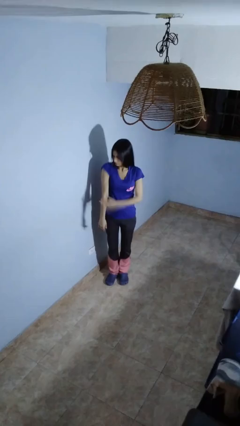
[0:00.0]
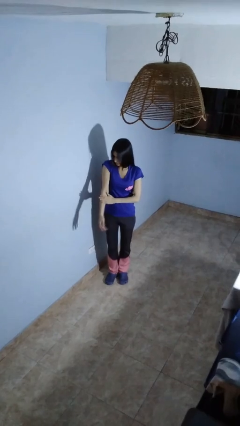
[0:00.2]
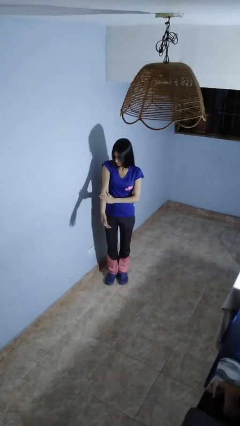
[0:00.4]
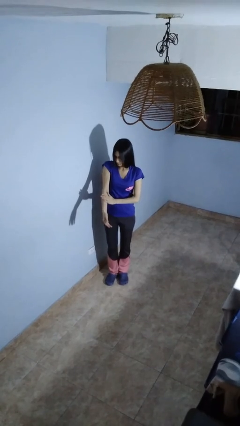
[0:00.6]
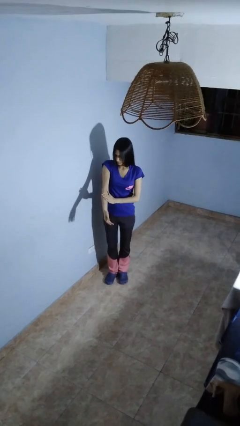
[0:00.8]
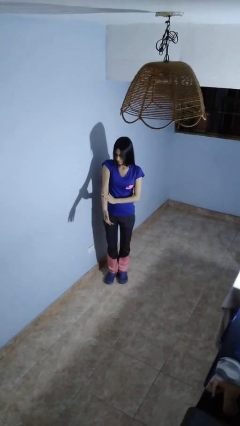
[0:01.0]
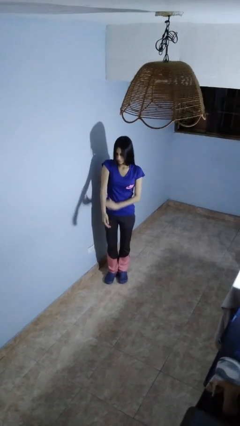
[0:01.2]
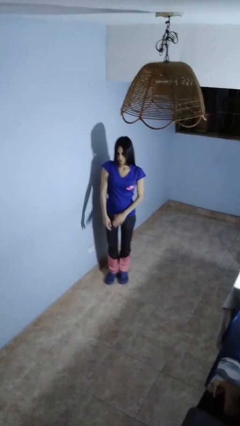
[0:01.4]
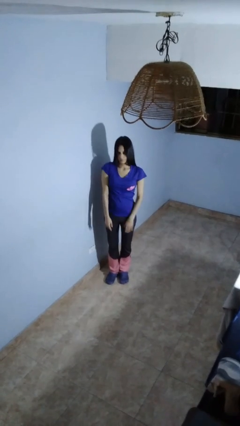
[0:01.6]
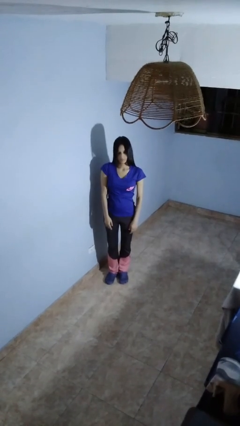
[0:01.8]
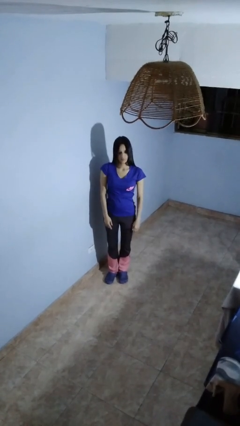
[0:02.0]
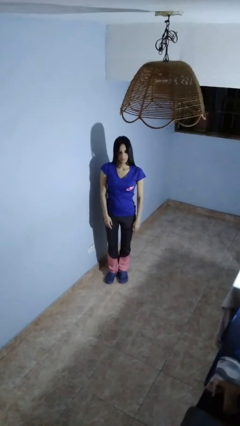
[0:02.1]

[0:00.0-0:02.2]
person swats bug

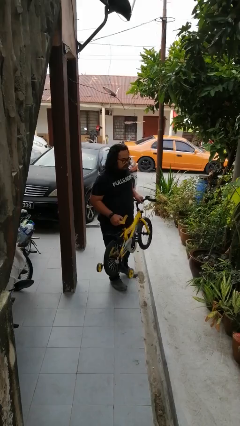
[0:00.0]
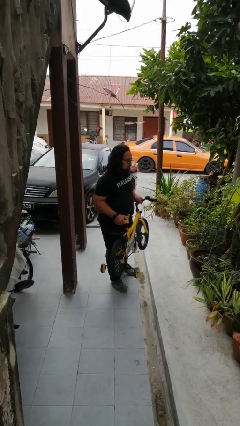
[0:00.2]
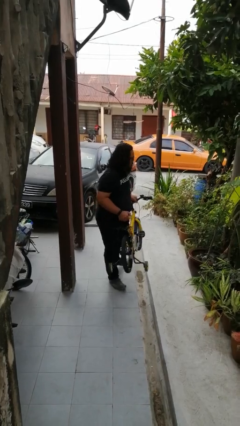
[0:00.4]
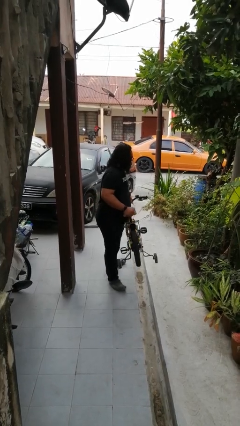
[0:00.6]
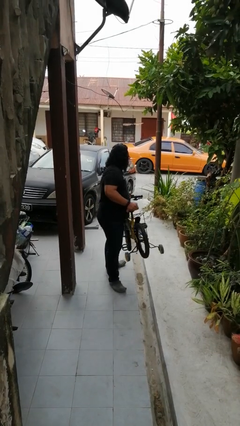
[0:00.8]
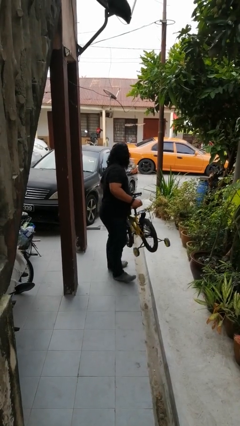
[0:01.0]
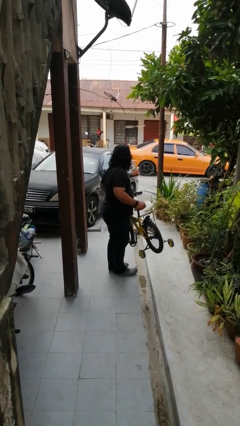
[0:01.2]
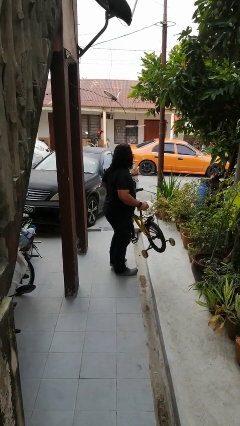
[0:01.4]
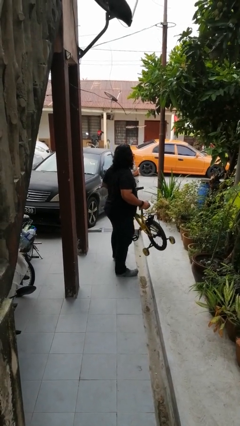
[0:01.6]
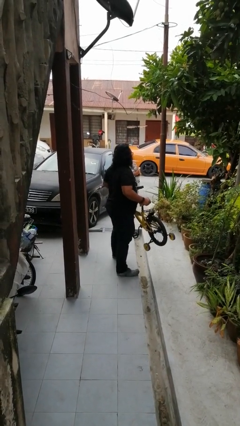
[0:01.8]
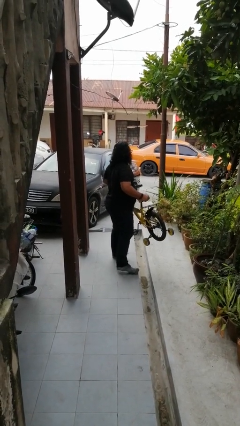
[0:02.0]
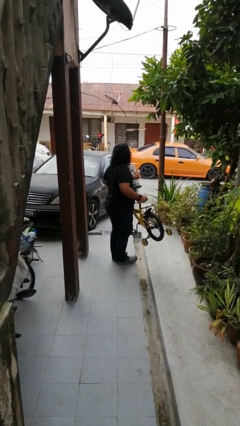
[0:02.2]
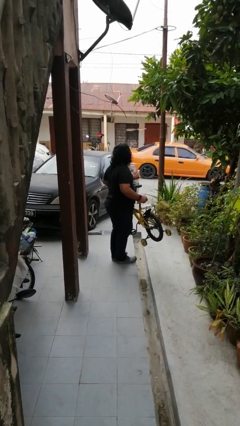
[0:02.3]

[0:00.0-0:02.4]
person carries bicycle

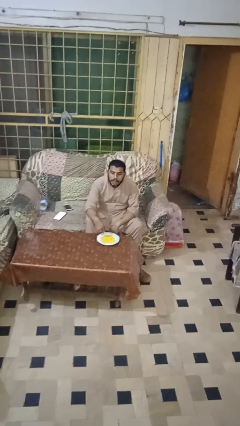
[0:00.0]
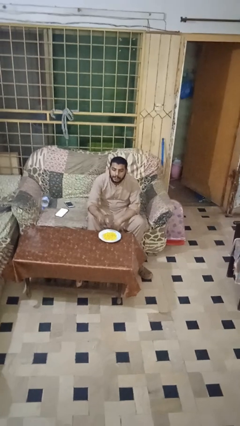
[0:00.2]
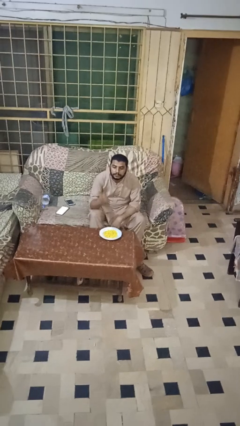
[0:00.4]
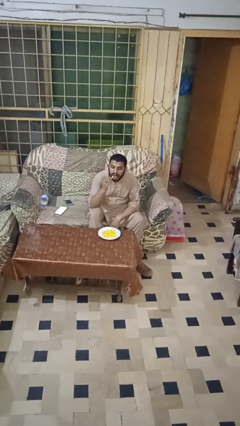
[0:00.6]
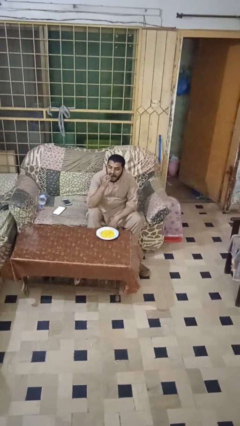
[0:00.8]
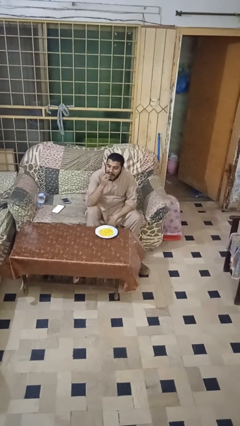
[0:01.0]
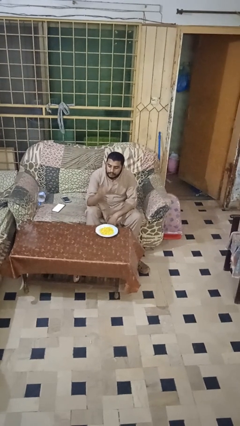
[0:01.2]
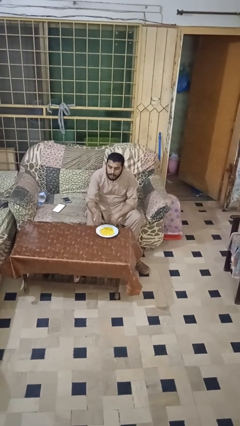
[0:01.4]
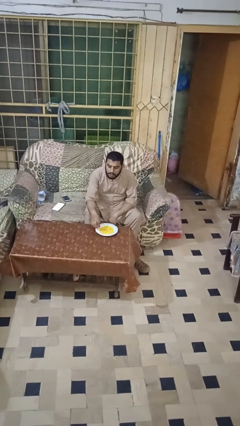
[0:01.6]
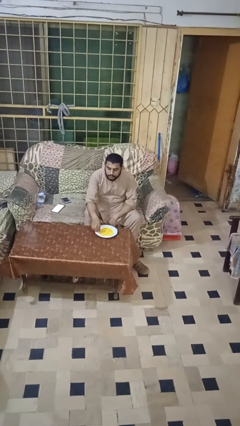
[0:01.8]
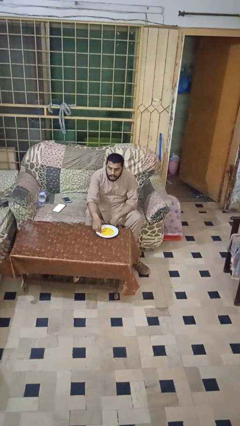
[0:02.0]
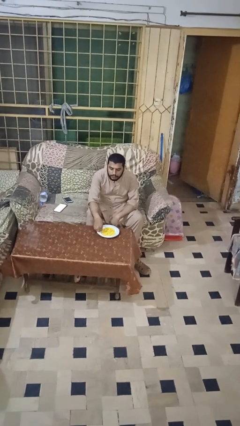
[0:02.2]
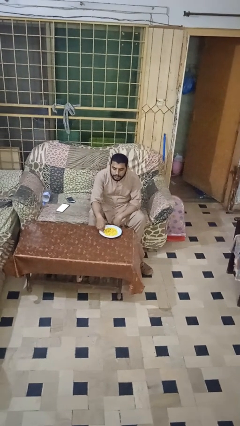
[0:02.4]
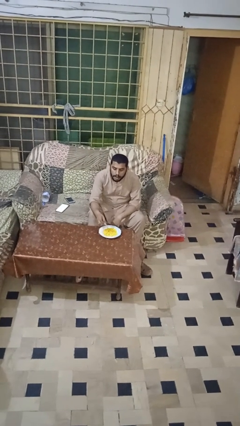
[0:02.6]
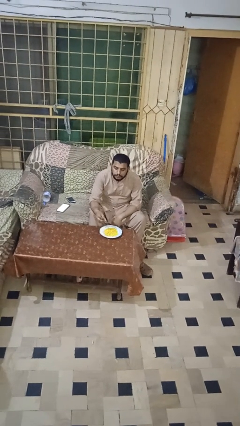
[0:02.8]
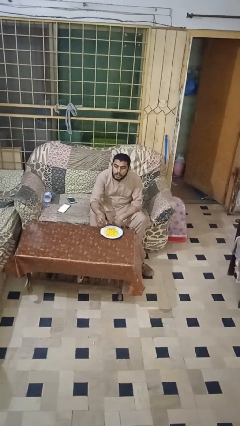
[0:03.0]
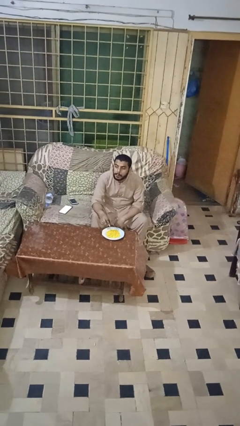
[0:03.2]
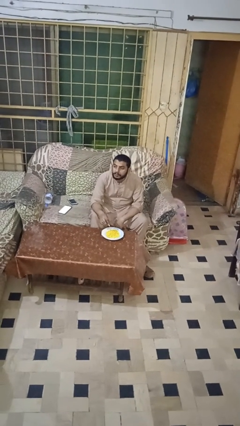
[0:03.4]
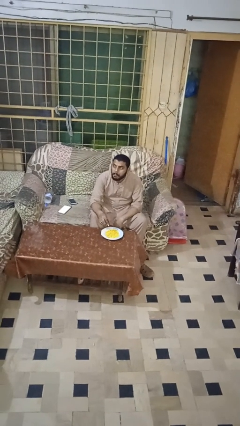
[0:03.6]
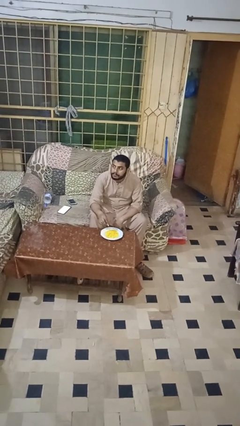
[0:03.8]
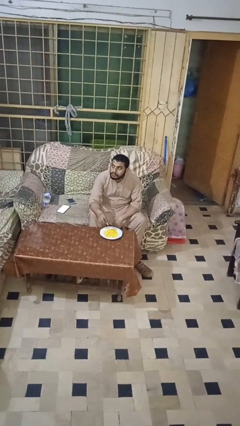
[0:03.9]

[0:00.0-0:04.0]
person eats with hands

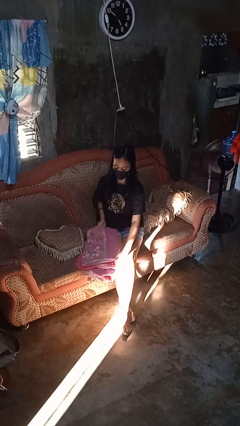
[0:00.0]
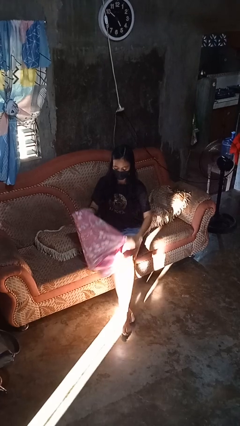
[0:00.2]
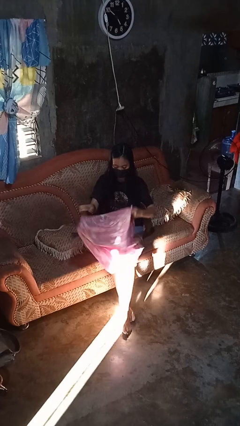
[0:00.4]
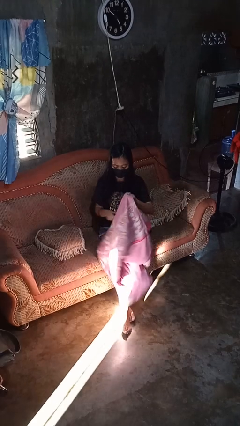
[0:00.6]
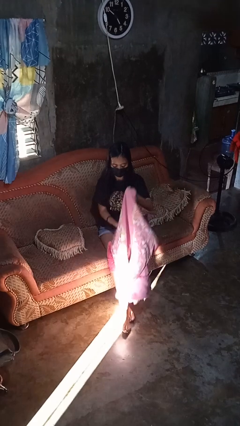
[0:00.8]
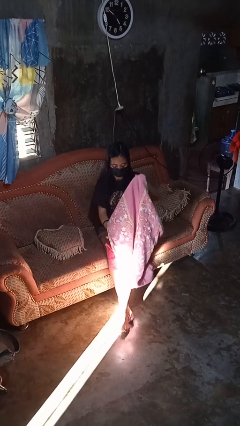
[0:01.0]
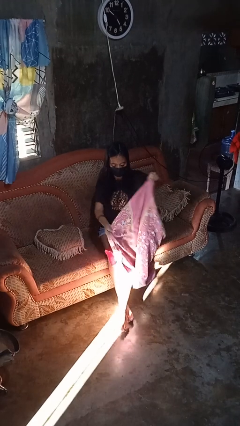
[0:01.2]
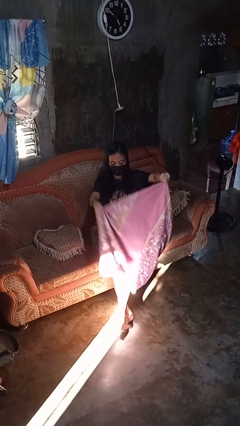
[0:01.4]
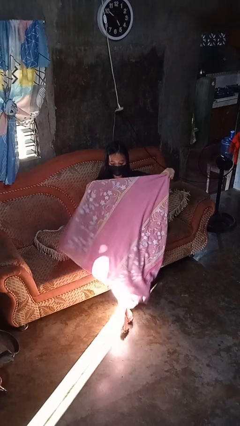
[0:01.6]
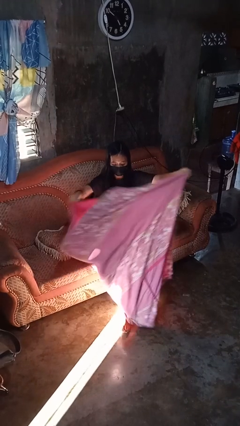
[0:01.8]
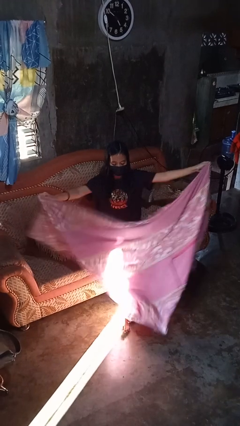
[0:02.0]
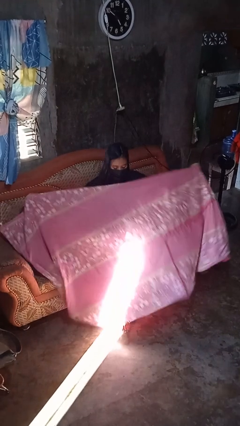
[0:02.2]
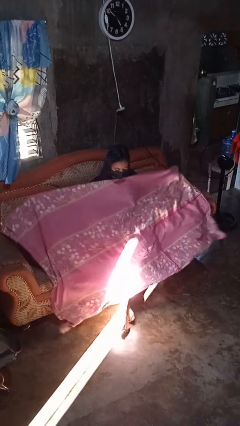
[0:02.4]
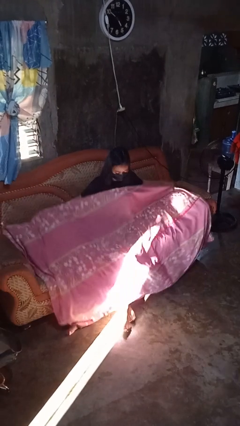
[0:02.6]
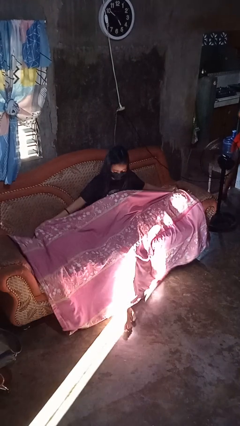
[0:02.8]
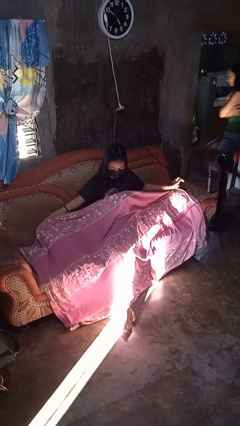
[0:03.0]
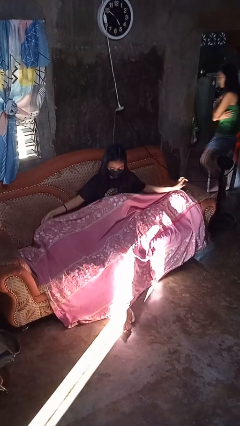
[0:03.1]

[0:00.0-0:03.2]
person unfolds blanket

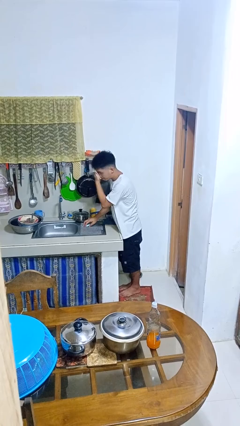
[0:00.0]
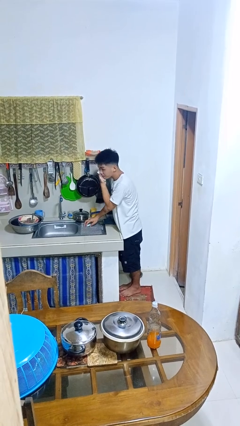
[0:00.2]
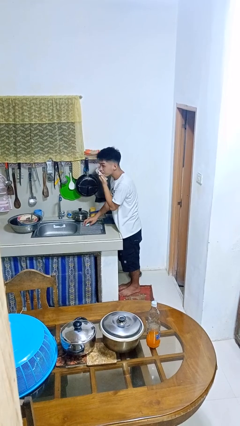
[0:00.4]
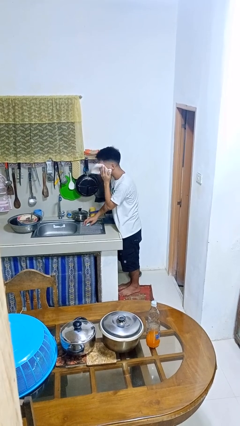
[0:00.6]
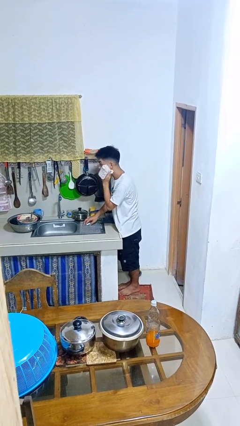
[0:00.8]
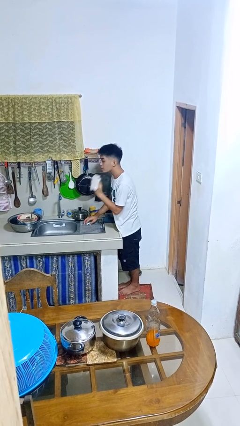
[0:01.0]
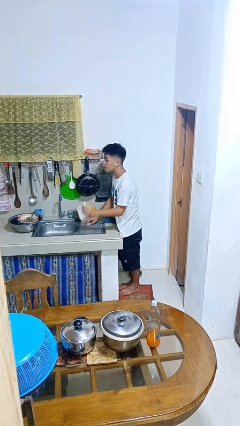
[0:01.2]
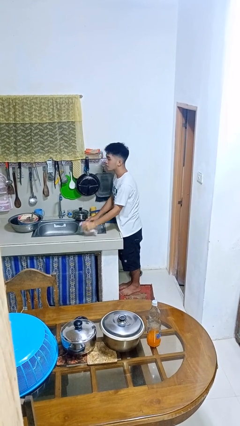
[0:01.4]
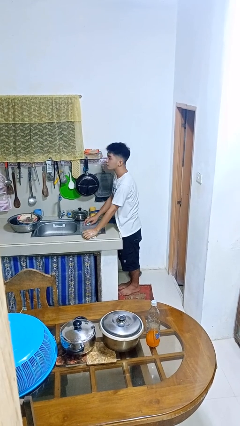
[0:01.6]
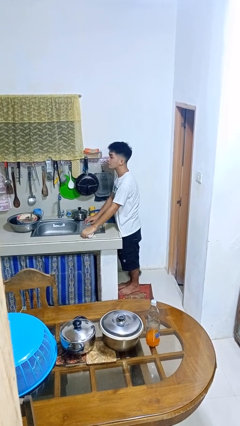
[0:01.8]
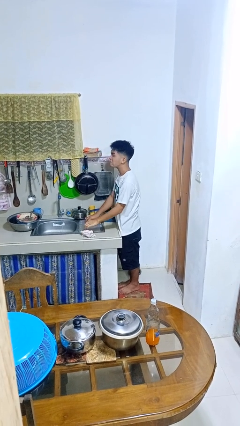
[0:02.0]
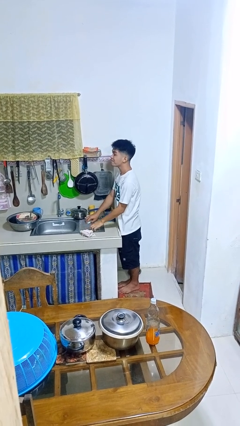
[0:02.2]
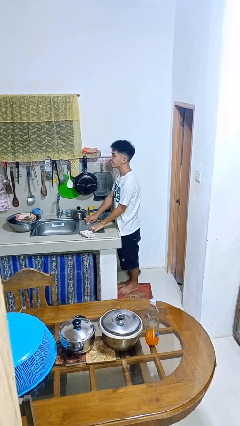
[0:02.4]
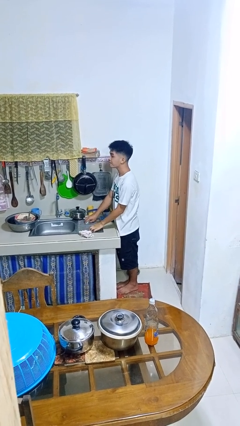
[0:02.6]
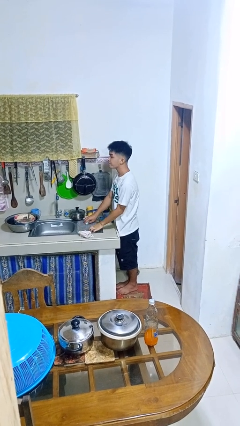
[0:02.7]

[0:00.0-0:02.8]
person dries face with towel

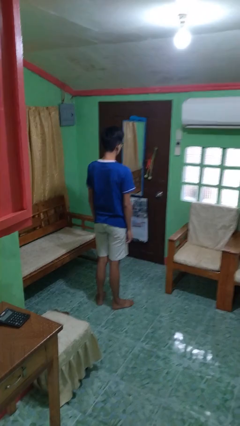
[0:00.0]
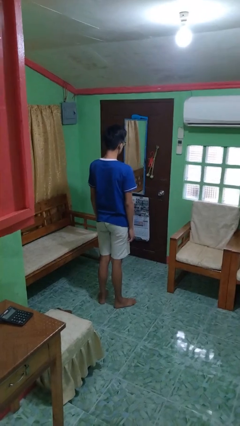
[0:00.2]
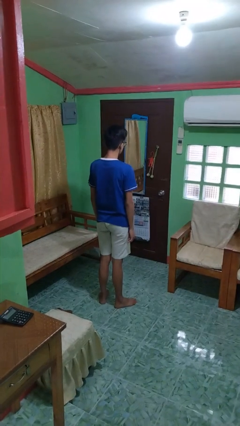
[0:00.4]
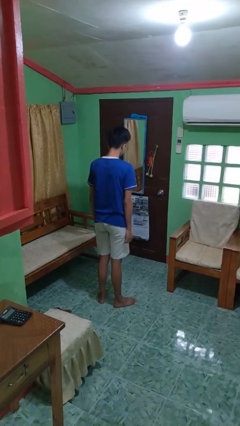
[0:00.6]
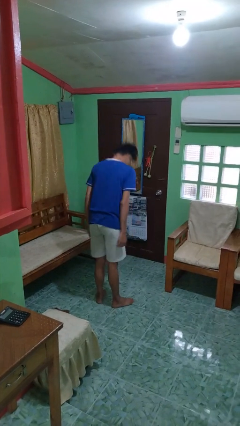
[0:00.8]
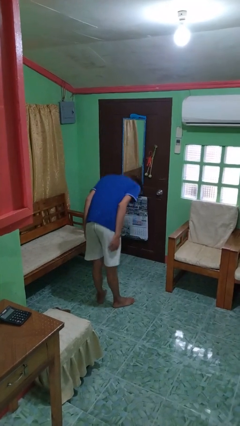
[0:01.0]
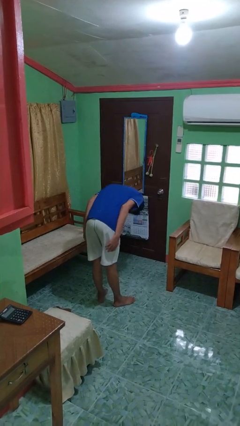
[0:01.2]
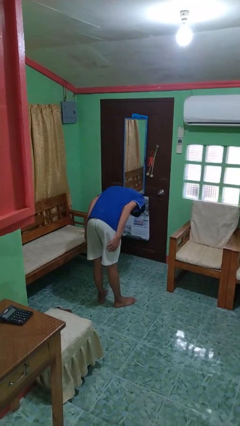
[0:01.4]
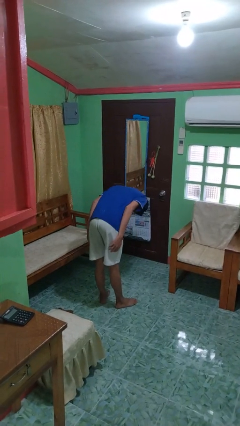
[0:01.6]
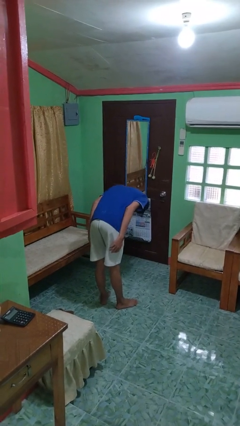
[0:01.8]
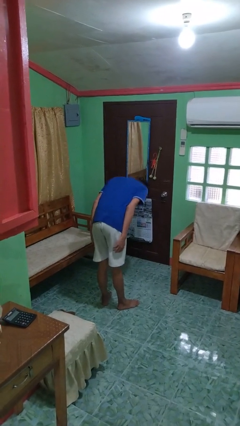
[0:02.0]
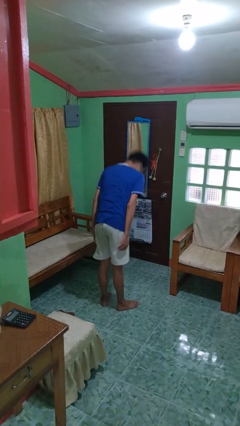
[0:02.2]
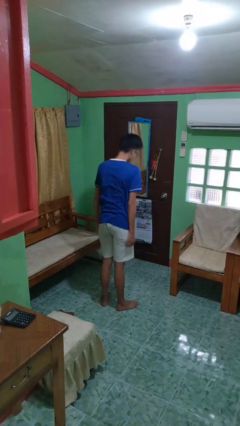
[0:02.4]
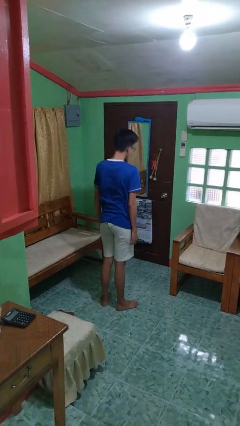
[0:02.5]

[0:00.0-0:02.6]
person bows

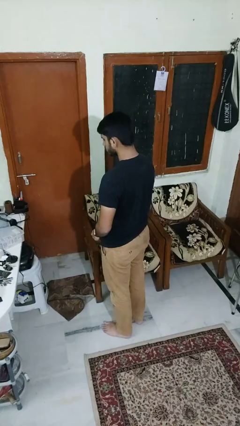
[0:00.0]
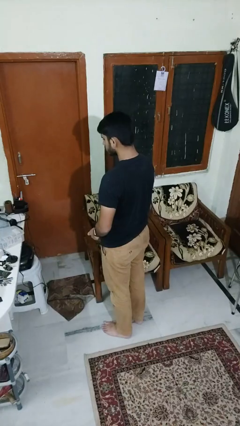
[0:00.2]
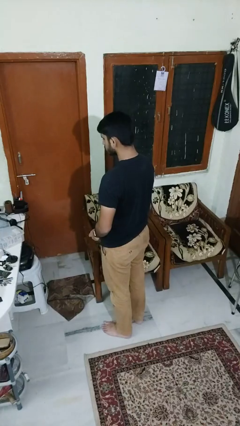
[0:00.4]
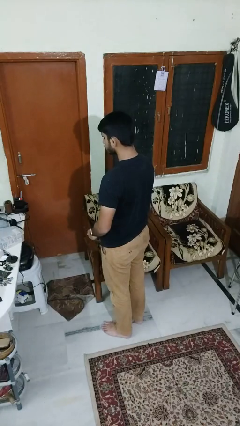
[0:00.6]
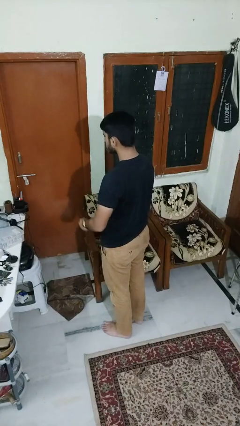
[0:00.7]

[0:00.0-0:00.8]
person puts on sunglasses
